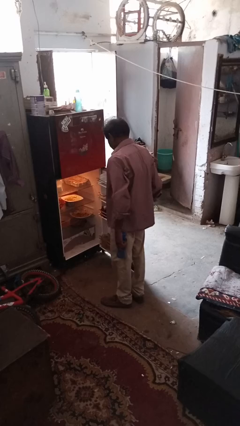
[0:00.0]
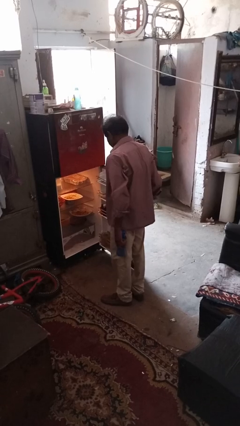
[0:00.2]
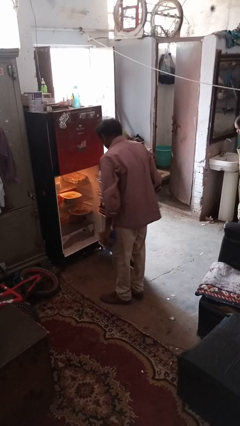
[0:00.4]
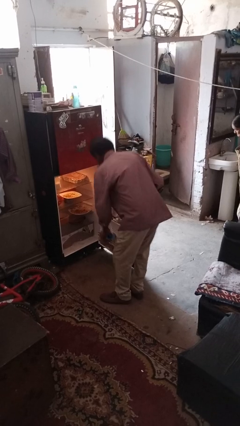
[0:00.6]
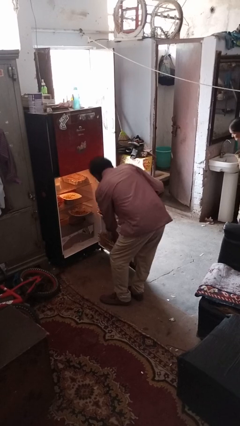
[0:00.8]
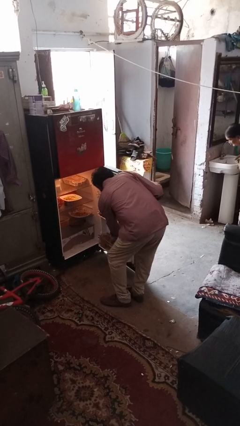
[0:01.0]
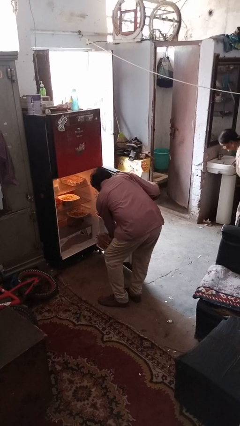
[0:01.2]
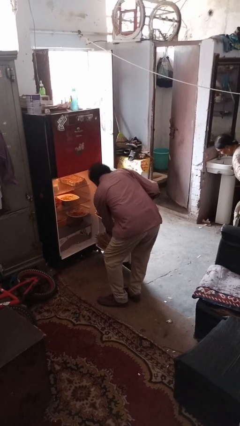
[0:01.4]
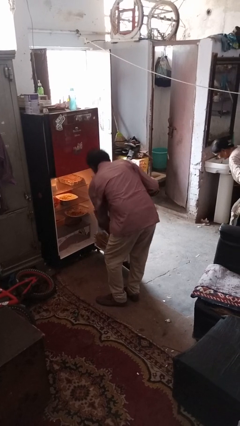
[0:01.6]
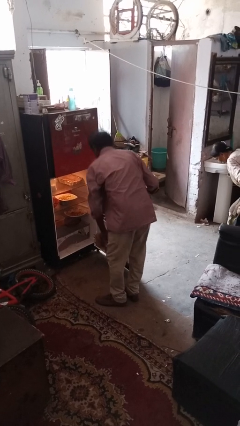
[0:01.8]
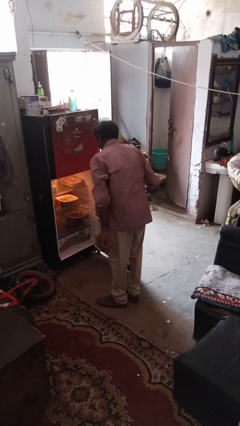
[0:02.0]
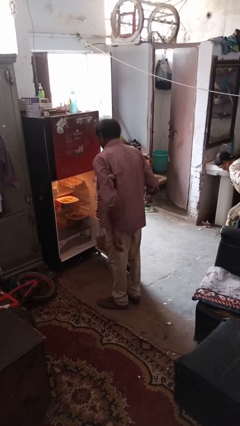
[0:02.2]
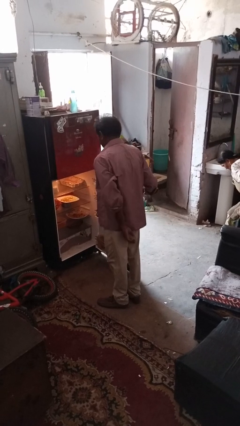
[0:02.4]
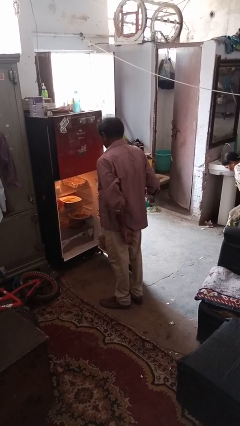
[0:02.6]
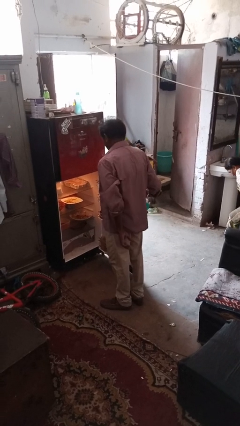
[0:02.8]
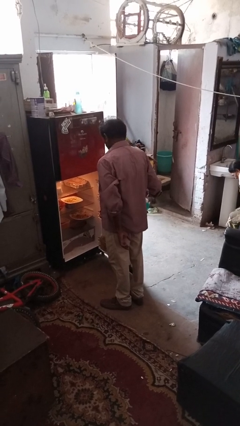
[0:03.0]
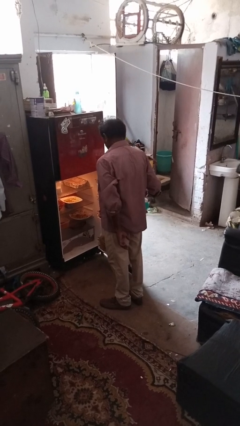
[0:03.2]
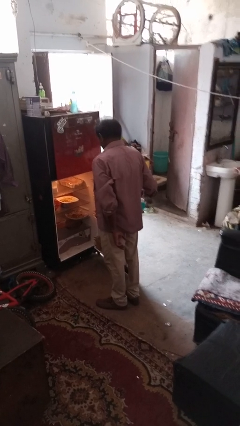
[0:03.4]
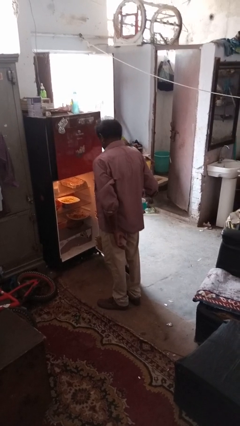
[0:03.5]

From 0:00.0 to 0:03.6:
person puts object into refrigerator

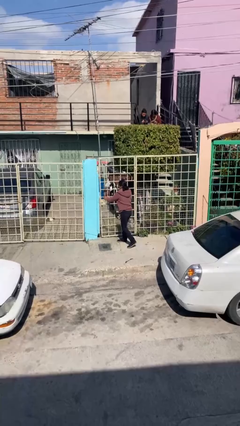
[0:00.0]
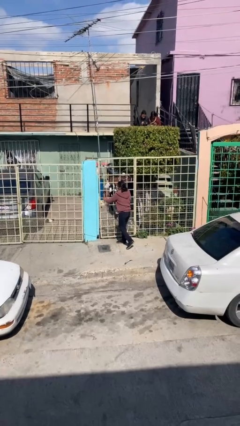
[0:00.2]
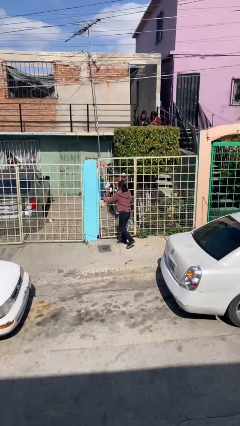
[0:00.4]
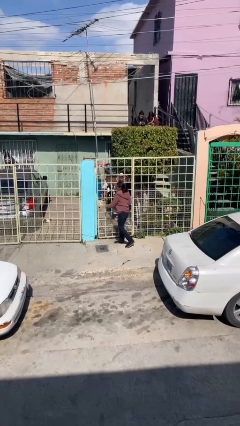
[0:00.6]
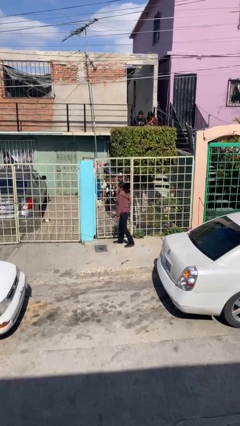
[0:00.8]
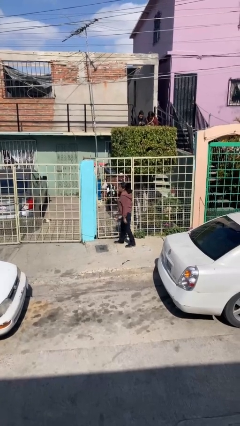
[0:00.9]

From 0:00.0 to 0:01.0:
person closes facility door

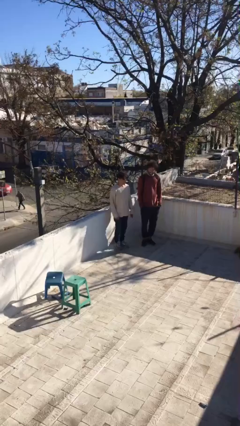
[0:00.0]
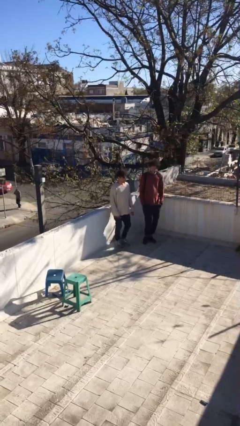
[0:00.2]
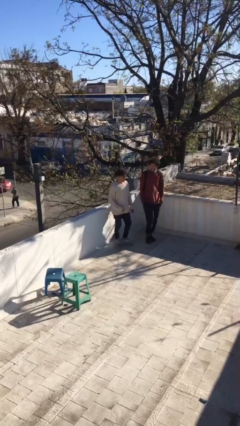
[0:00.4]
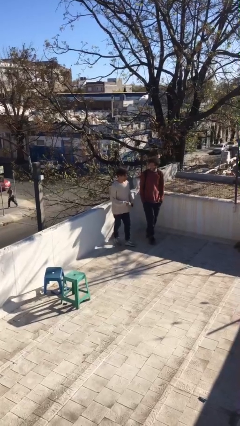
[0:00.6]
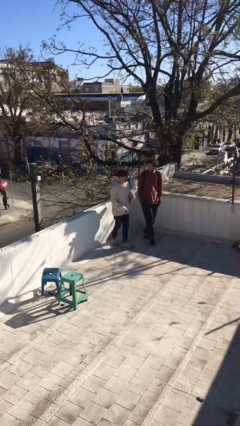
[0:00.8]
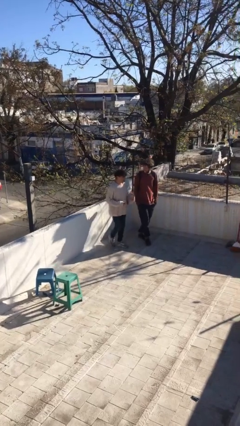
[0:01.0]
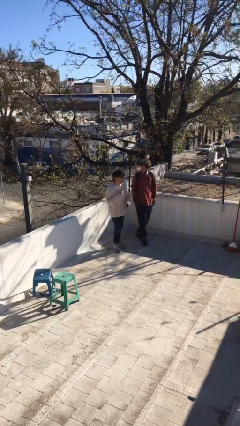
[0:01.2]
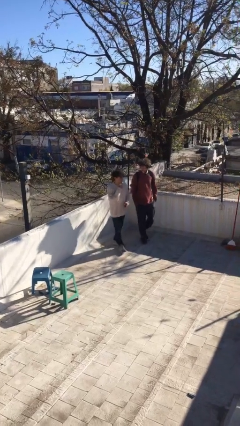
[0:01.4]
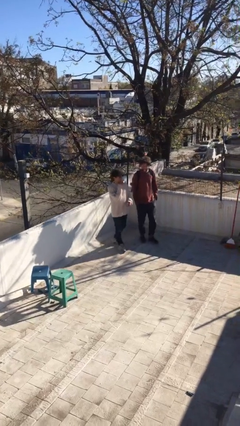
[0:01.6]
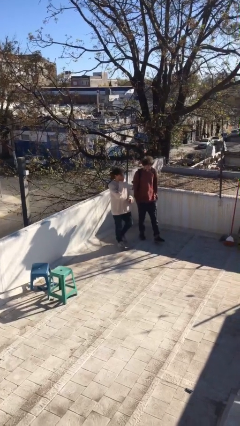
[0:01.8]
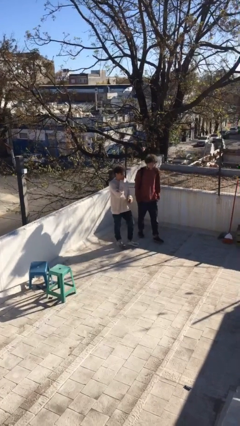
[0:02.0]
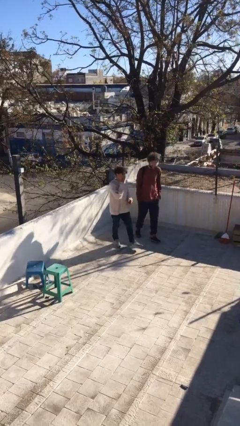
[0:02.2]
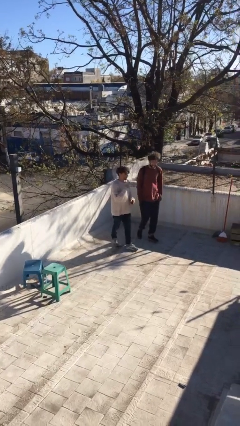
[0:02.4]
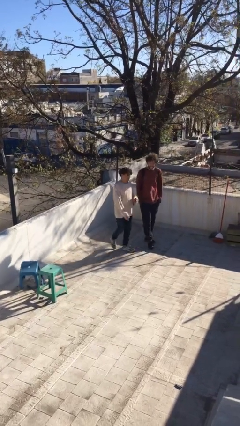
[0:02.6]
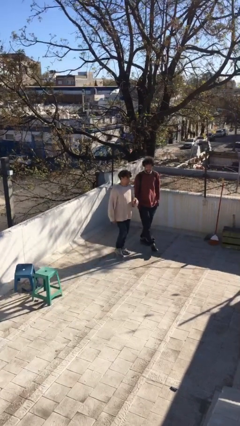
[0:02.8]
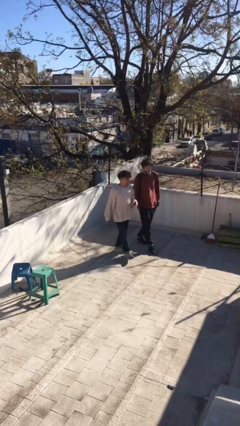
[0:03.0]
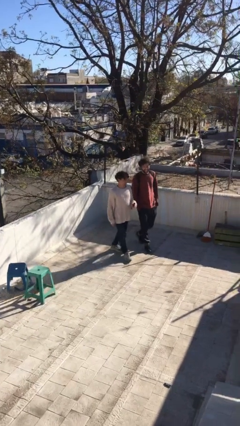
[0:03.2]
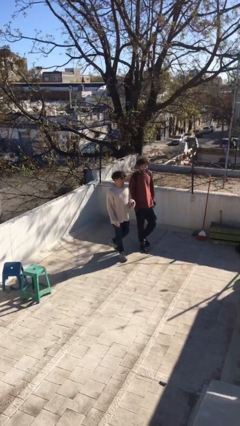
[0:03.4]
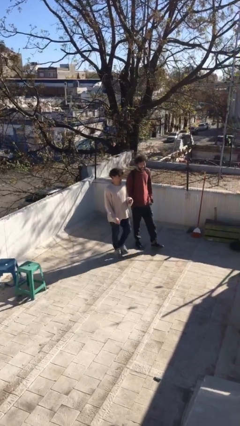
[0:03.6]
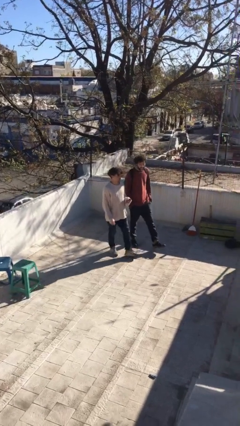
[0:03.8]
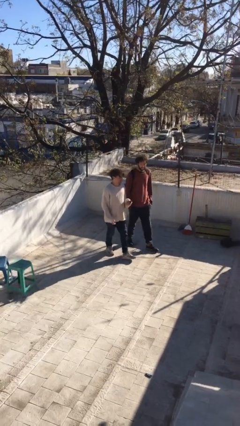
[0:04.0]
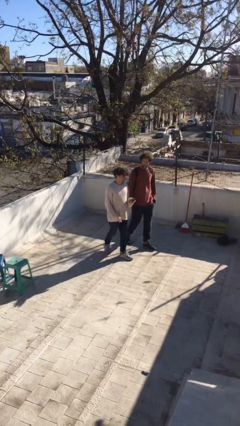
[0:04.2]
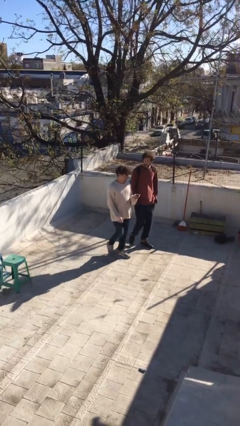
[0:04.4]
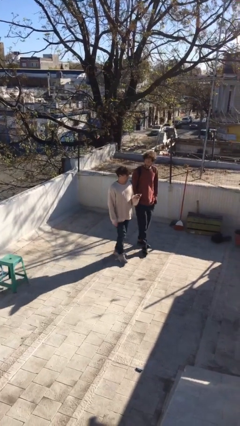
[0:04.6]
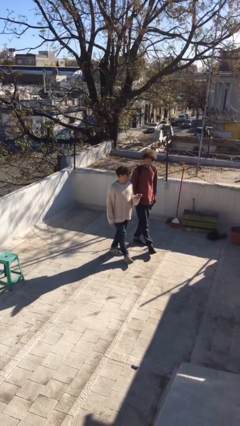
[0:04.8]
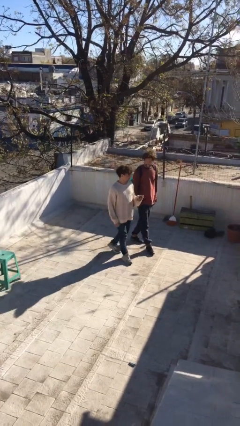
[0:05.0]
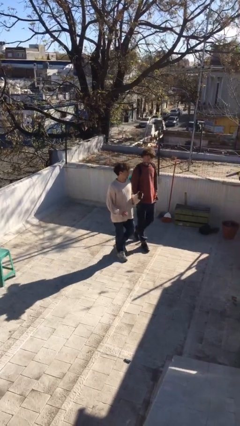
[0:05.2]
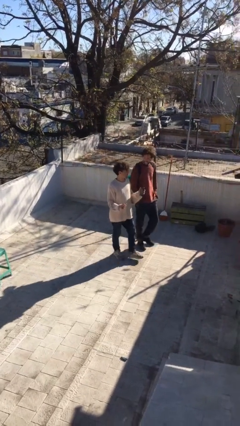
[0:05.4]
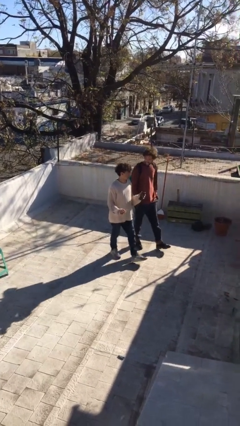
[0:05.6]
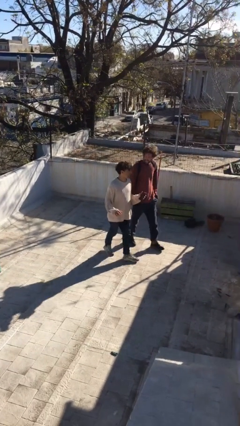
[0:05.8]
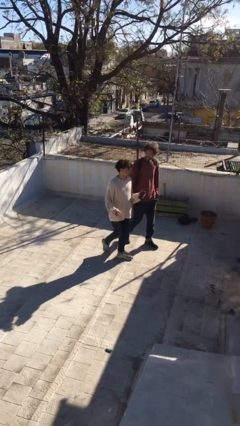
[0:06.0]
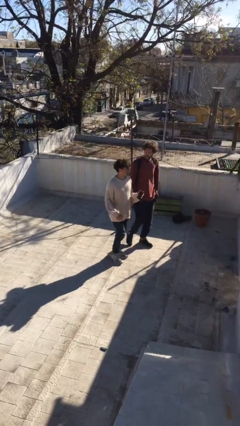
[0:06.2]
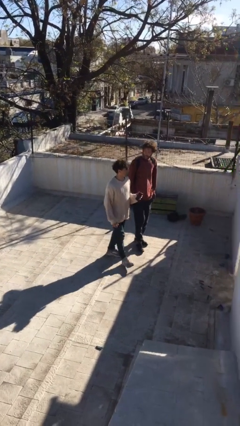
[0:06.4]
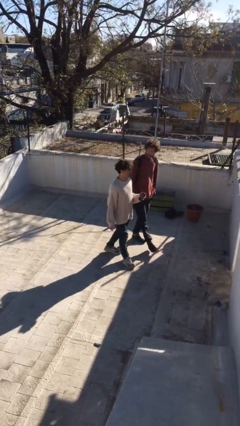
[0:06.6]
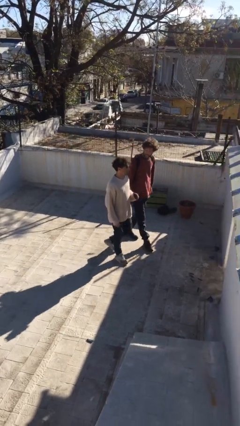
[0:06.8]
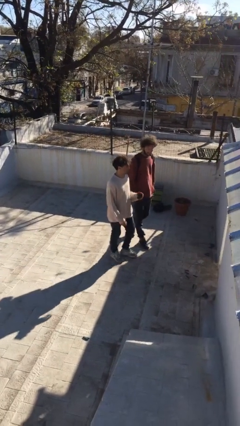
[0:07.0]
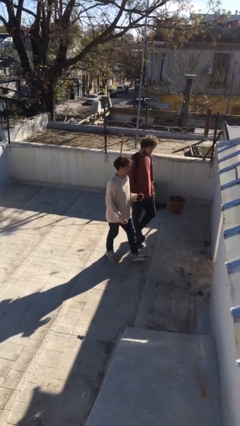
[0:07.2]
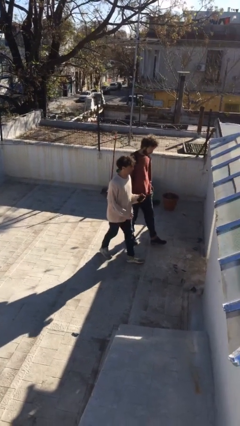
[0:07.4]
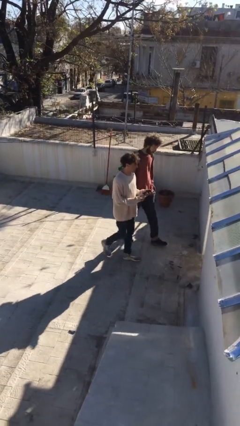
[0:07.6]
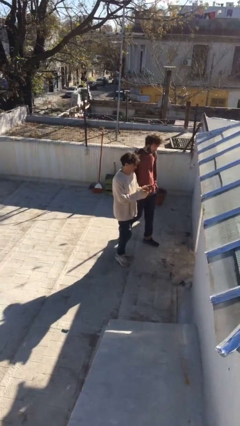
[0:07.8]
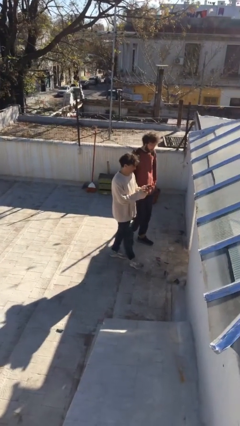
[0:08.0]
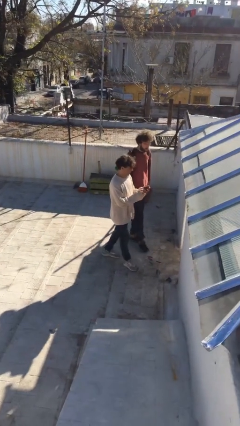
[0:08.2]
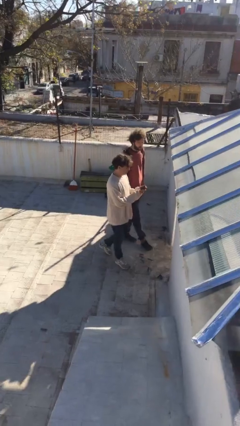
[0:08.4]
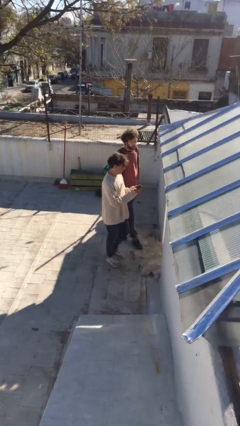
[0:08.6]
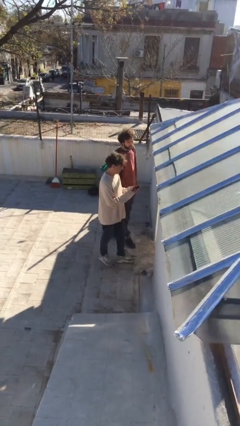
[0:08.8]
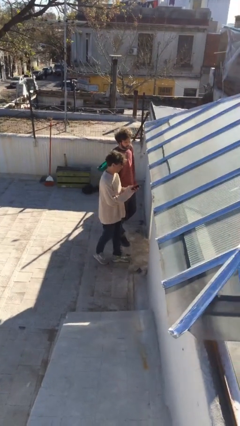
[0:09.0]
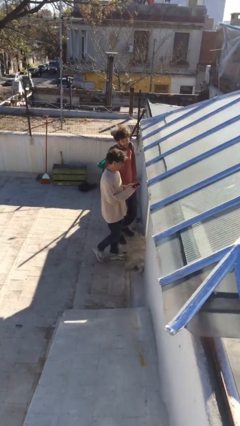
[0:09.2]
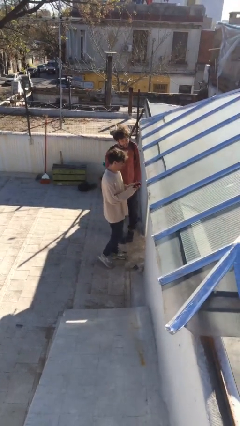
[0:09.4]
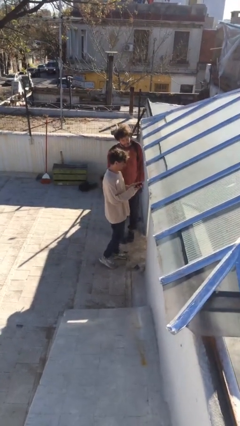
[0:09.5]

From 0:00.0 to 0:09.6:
person talks to person

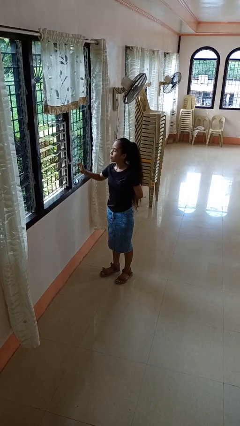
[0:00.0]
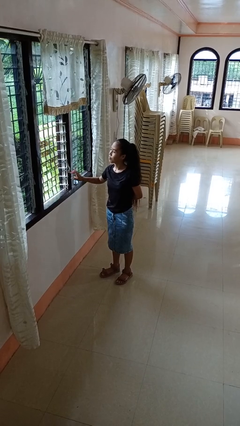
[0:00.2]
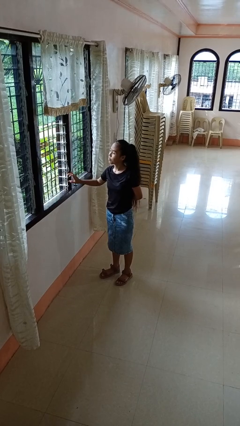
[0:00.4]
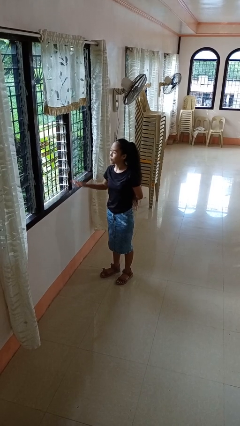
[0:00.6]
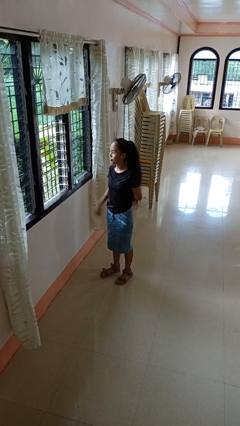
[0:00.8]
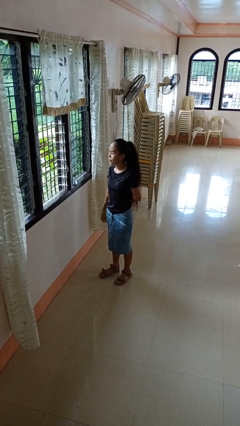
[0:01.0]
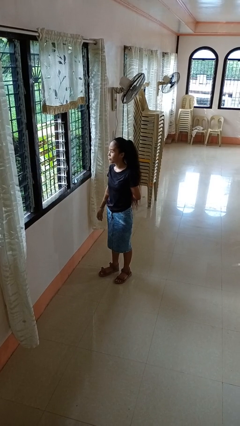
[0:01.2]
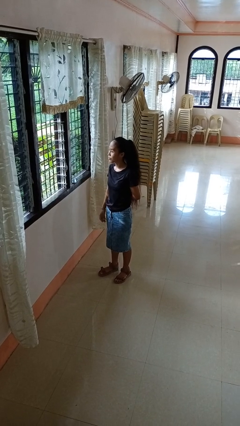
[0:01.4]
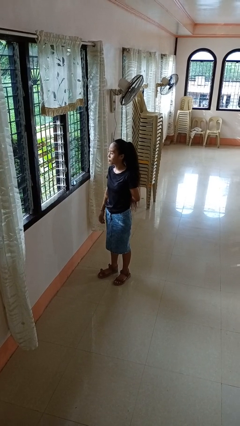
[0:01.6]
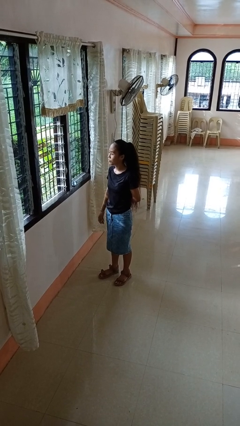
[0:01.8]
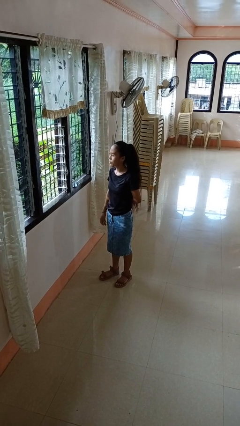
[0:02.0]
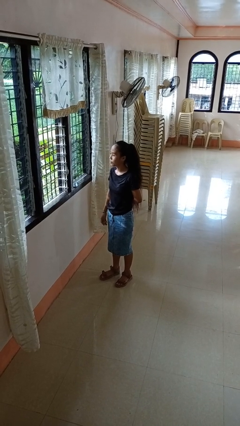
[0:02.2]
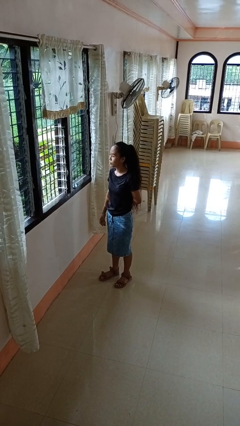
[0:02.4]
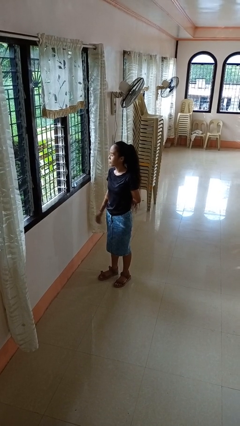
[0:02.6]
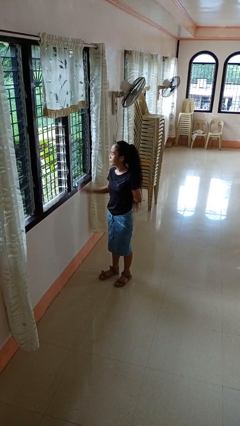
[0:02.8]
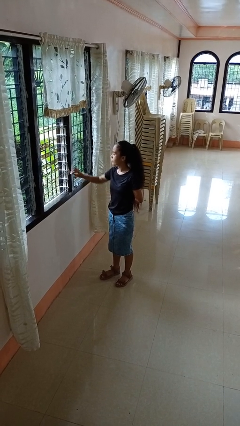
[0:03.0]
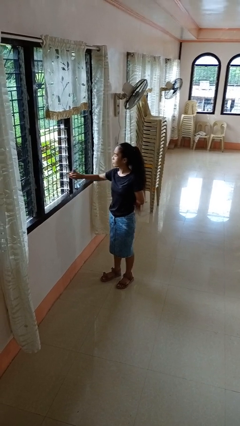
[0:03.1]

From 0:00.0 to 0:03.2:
person opens home window

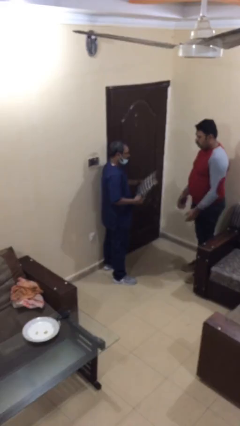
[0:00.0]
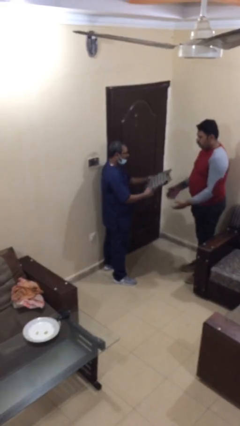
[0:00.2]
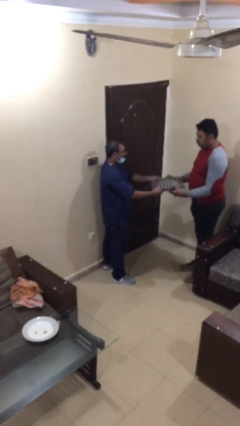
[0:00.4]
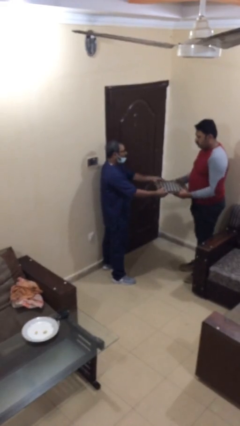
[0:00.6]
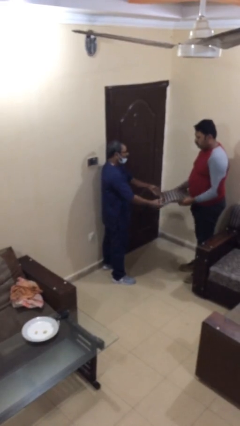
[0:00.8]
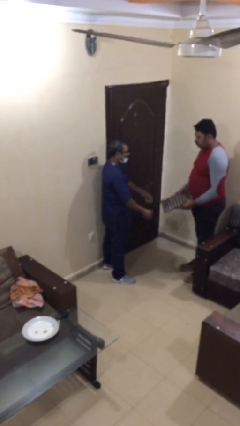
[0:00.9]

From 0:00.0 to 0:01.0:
person transfers object to person
